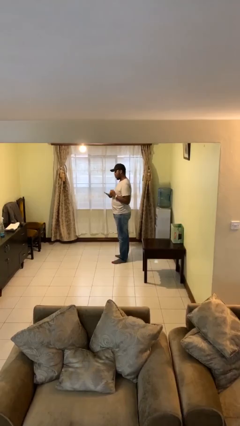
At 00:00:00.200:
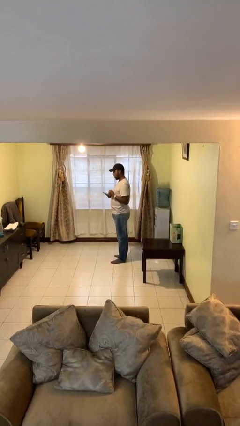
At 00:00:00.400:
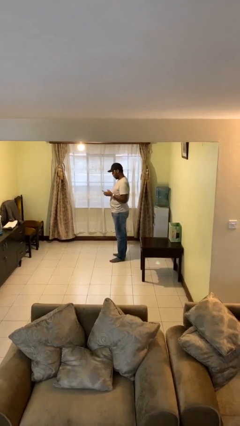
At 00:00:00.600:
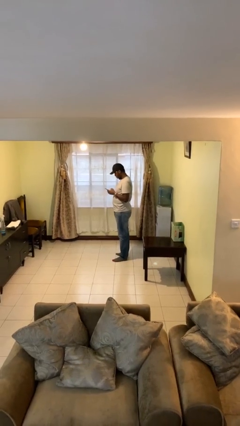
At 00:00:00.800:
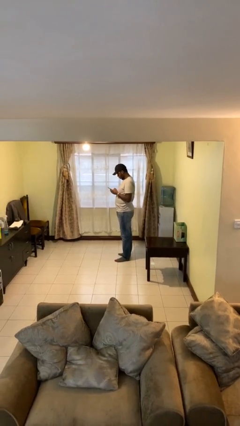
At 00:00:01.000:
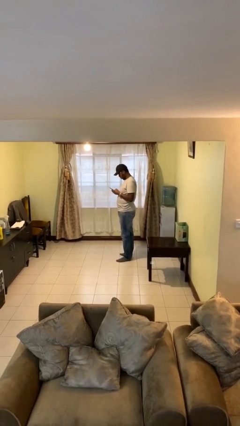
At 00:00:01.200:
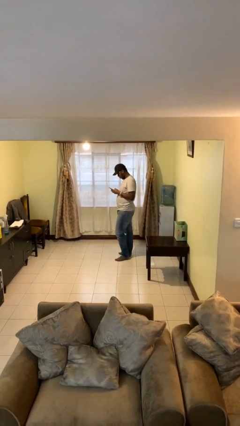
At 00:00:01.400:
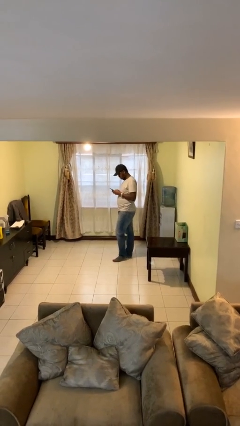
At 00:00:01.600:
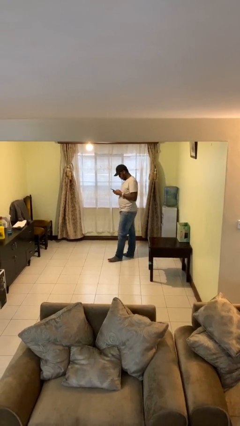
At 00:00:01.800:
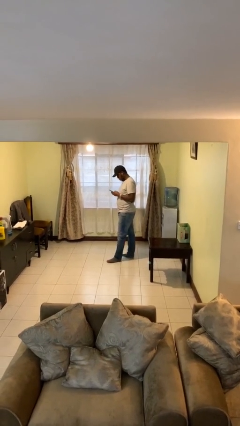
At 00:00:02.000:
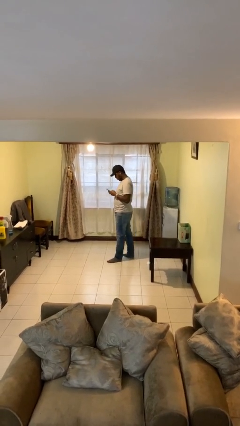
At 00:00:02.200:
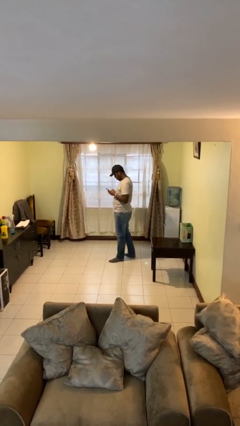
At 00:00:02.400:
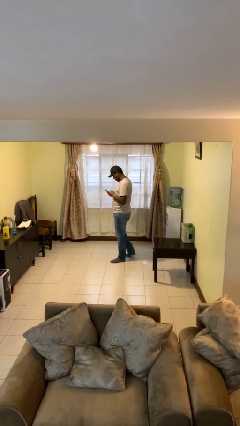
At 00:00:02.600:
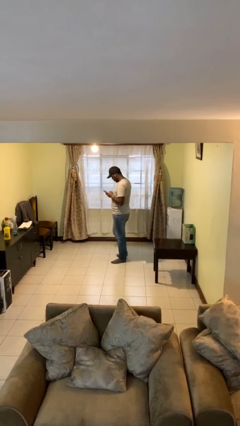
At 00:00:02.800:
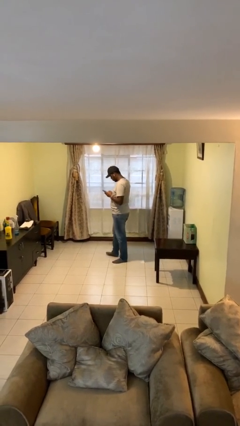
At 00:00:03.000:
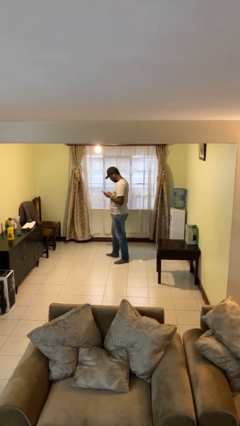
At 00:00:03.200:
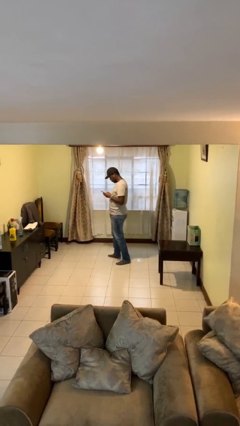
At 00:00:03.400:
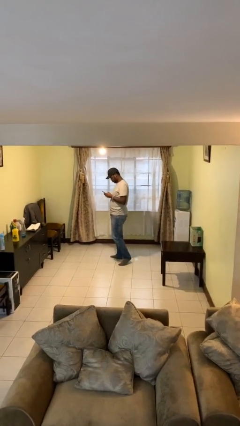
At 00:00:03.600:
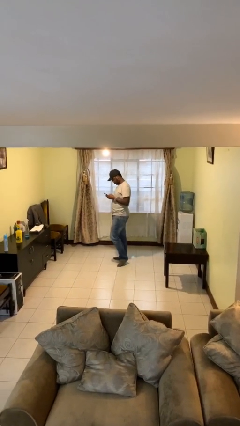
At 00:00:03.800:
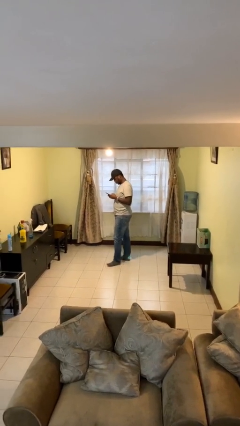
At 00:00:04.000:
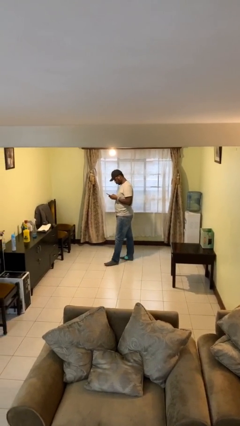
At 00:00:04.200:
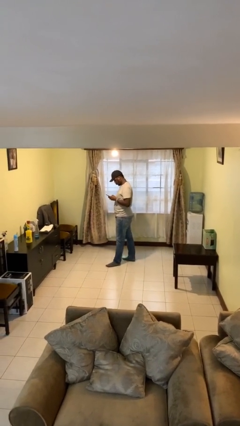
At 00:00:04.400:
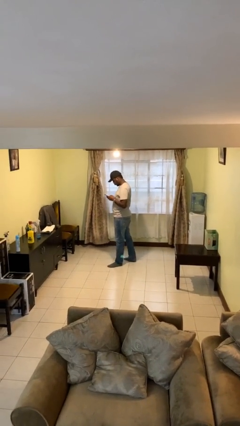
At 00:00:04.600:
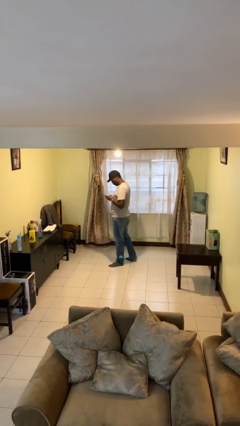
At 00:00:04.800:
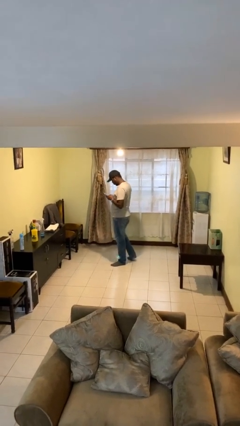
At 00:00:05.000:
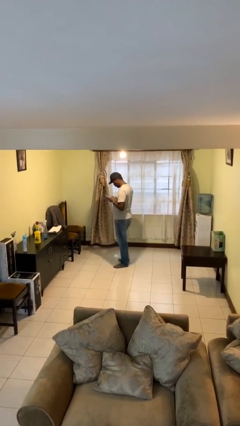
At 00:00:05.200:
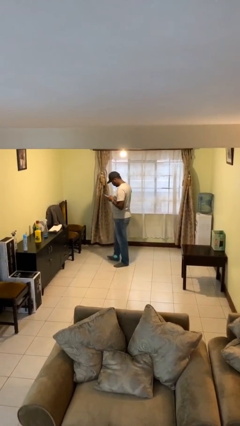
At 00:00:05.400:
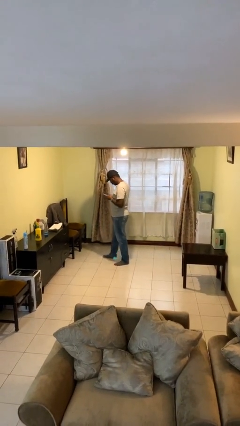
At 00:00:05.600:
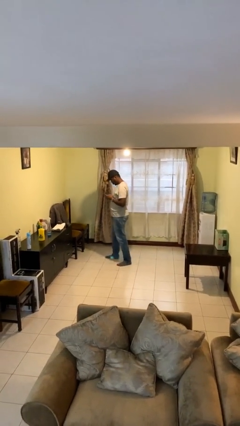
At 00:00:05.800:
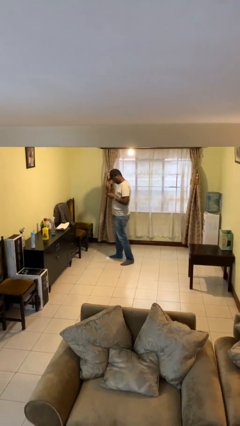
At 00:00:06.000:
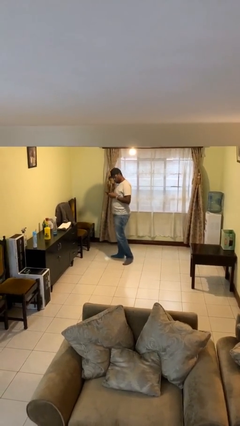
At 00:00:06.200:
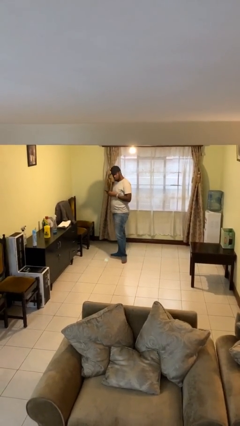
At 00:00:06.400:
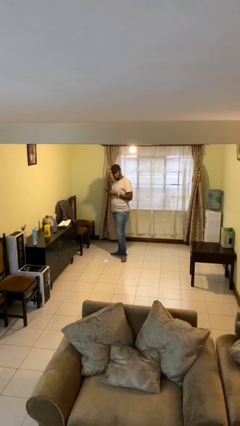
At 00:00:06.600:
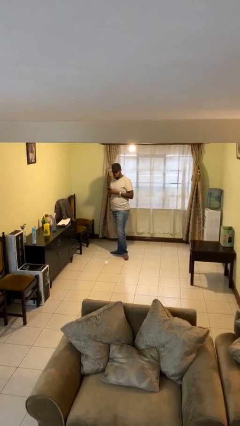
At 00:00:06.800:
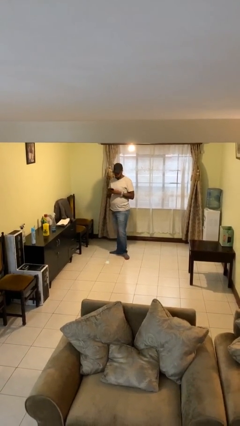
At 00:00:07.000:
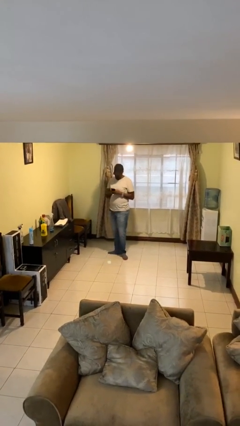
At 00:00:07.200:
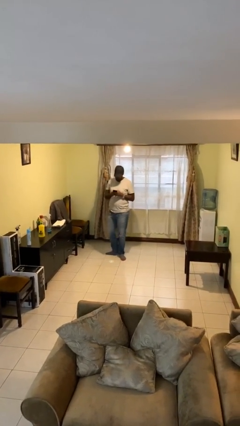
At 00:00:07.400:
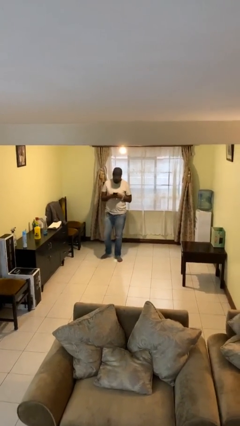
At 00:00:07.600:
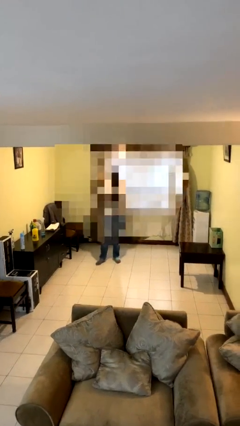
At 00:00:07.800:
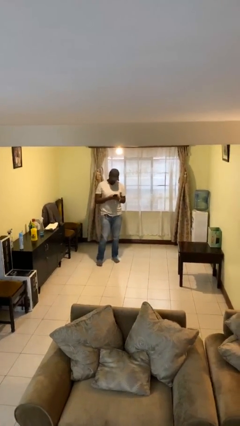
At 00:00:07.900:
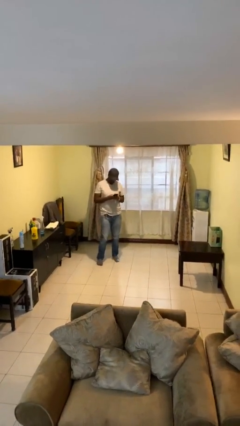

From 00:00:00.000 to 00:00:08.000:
person texts on phone

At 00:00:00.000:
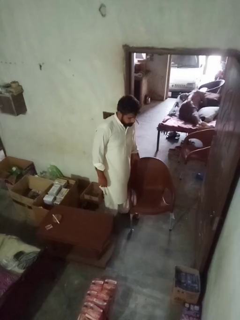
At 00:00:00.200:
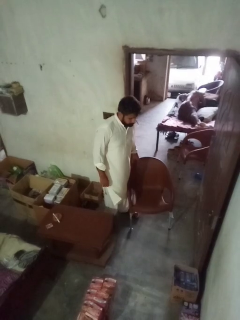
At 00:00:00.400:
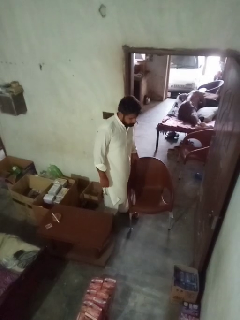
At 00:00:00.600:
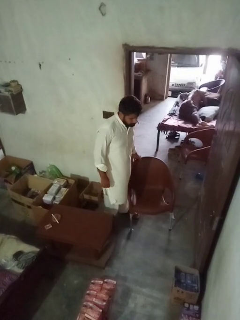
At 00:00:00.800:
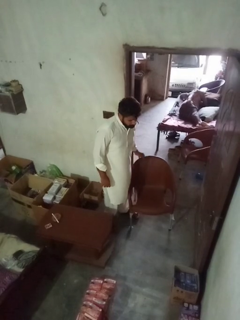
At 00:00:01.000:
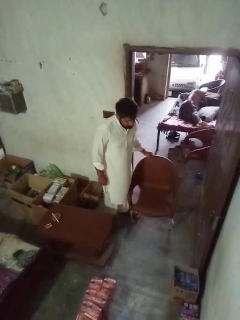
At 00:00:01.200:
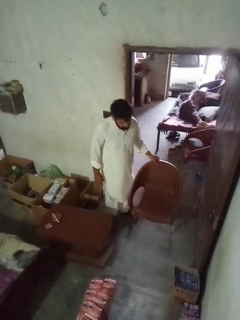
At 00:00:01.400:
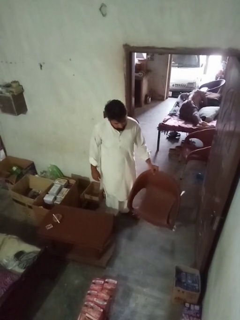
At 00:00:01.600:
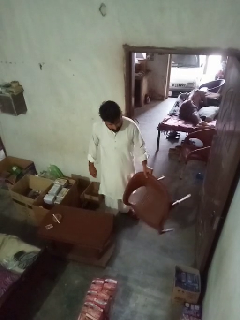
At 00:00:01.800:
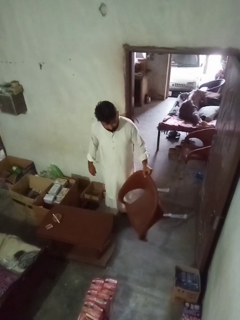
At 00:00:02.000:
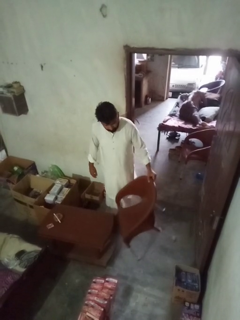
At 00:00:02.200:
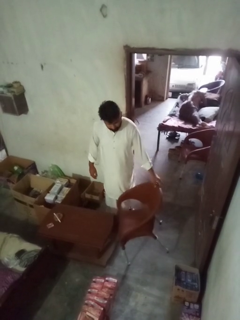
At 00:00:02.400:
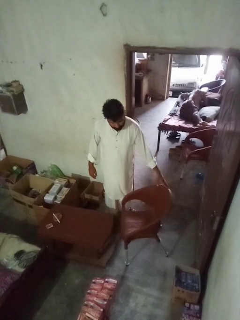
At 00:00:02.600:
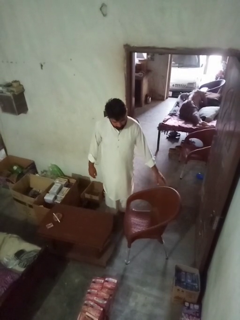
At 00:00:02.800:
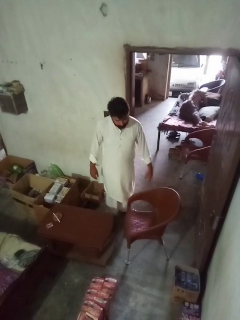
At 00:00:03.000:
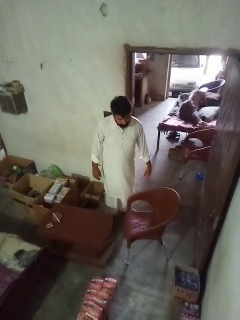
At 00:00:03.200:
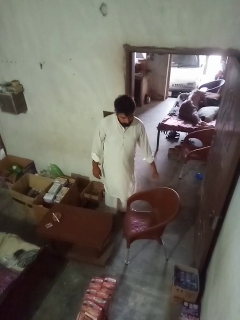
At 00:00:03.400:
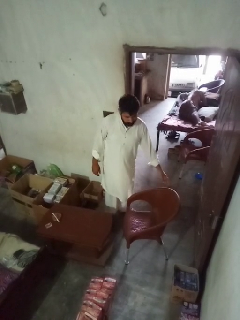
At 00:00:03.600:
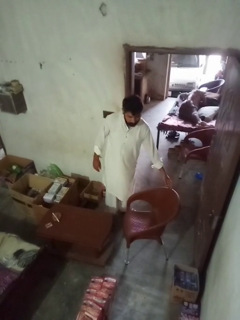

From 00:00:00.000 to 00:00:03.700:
person pushes in chair

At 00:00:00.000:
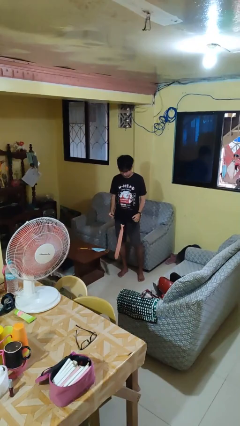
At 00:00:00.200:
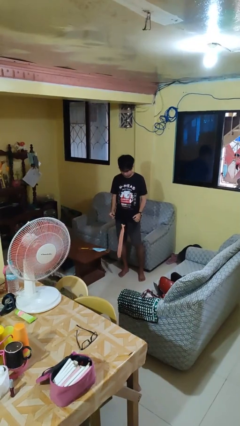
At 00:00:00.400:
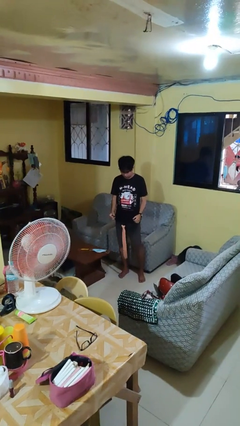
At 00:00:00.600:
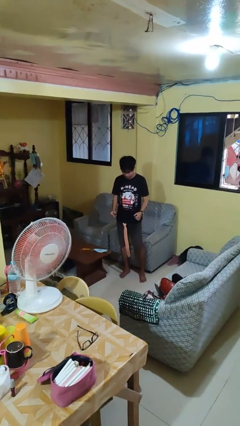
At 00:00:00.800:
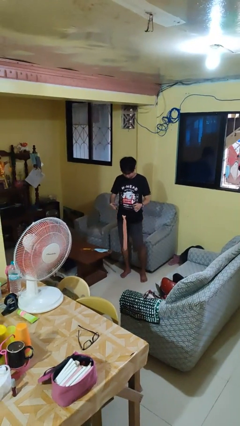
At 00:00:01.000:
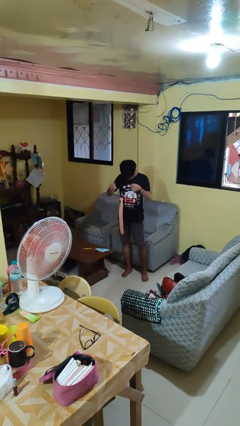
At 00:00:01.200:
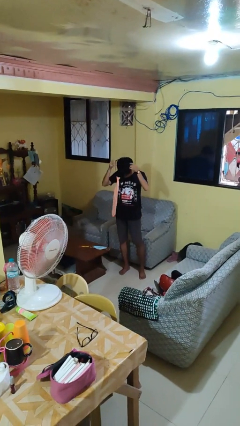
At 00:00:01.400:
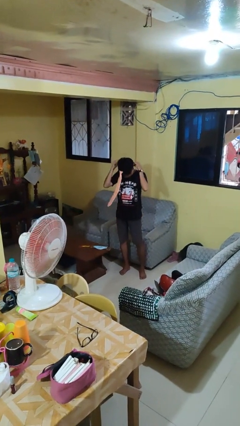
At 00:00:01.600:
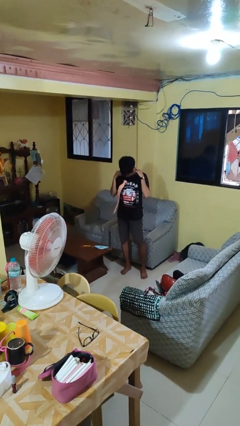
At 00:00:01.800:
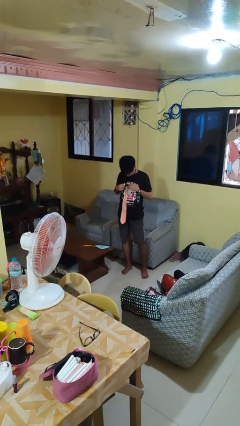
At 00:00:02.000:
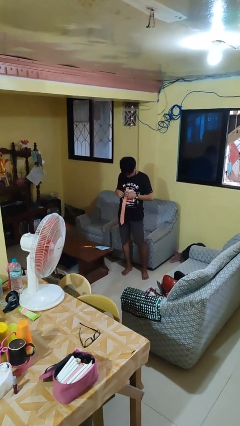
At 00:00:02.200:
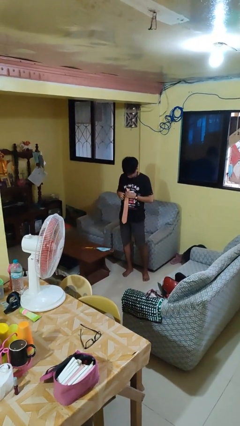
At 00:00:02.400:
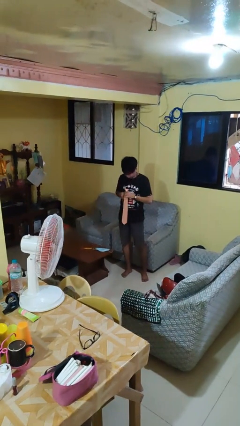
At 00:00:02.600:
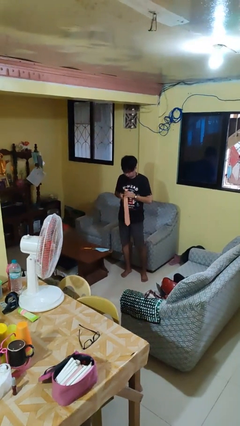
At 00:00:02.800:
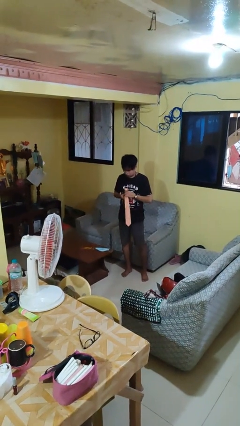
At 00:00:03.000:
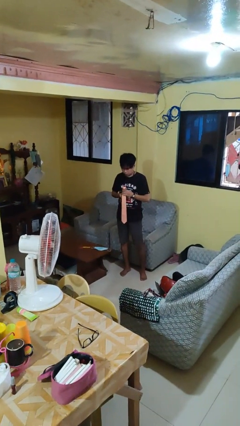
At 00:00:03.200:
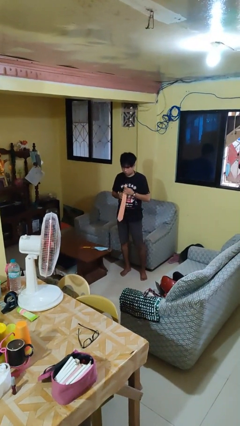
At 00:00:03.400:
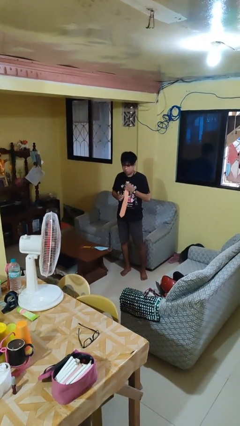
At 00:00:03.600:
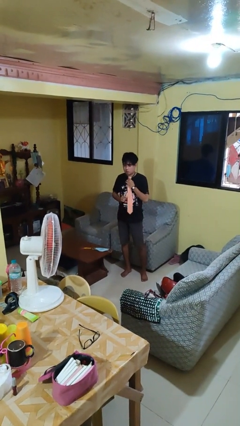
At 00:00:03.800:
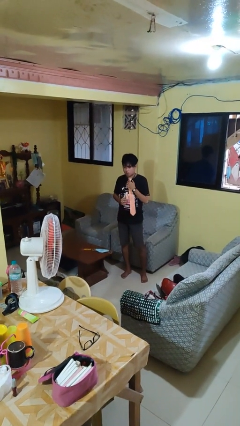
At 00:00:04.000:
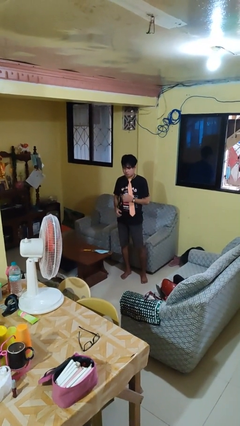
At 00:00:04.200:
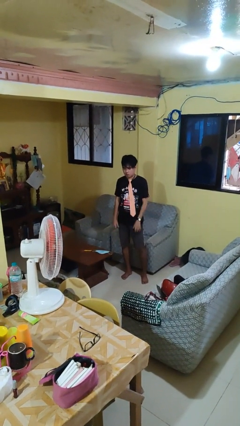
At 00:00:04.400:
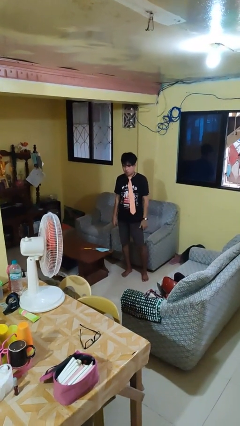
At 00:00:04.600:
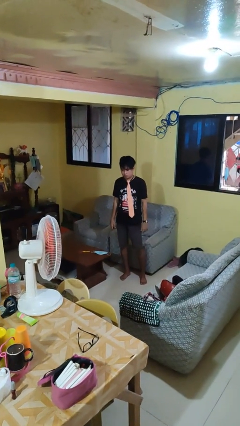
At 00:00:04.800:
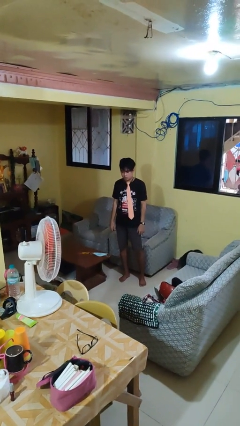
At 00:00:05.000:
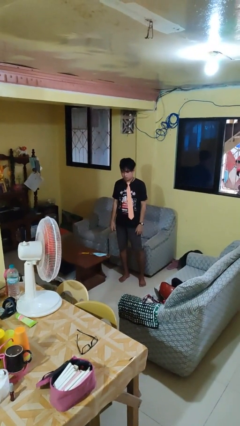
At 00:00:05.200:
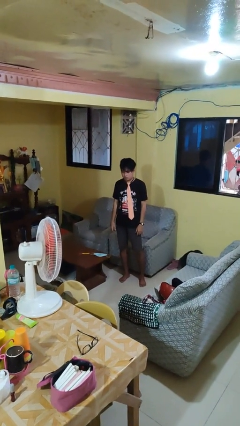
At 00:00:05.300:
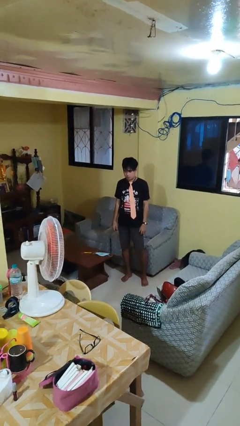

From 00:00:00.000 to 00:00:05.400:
person puts on necktie

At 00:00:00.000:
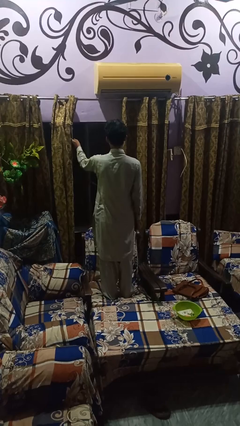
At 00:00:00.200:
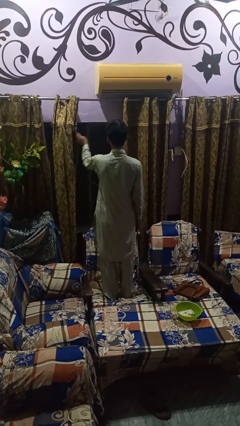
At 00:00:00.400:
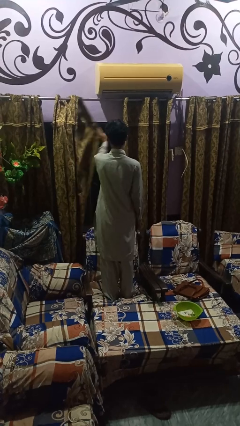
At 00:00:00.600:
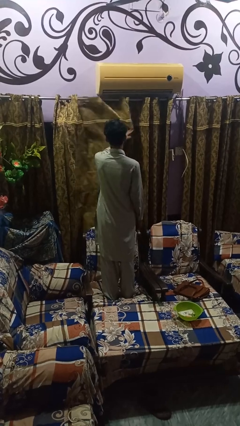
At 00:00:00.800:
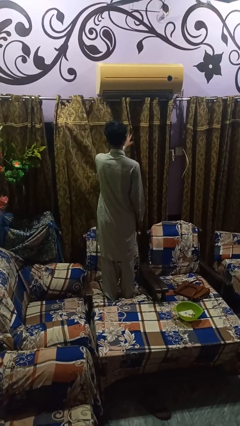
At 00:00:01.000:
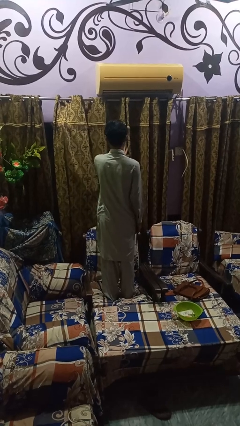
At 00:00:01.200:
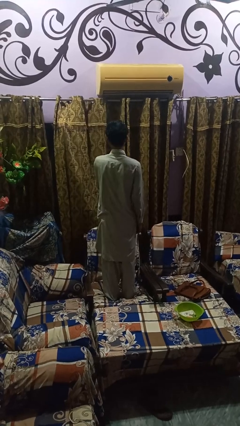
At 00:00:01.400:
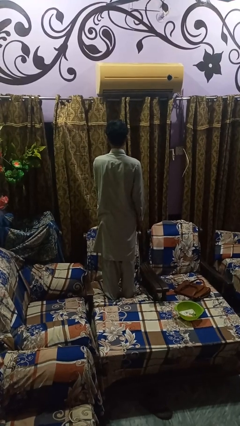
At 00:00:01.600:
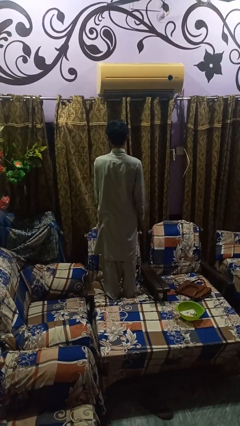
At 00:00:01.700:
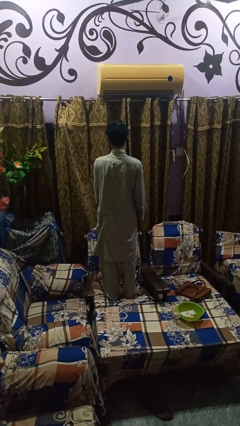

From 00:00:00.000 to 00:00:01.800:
person closes curtains
